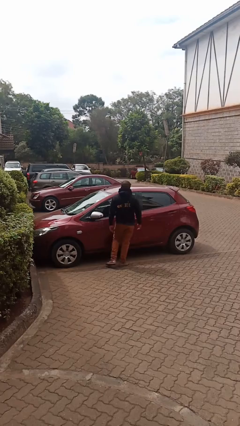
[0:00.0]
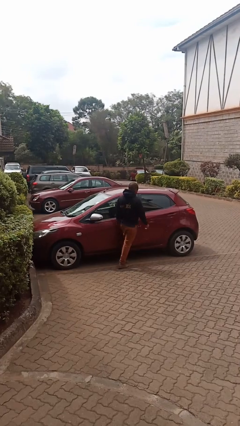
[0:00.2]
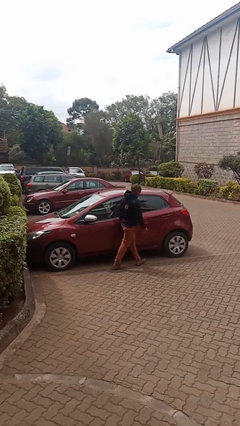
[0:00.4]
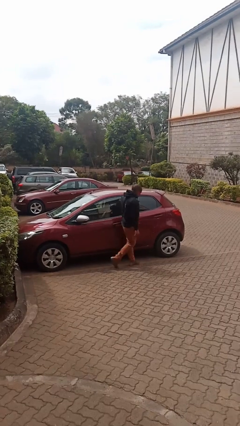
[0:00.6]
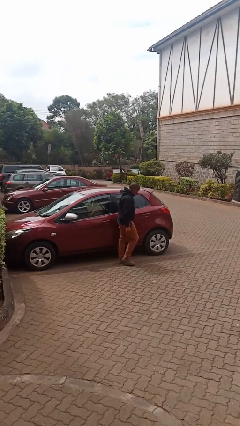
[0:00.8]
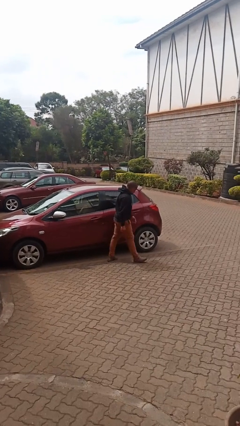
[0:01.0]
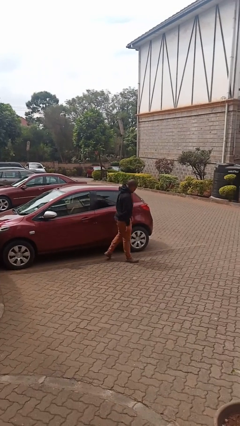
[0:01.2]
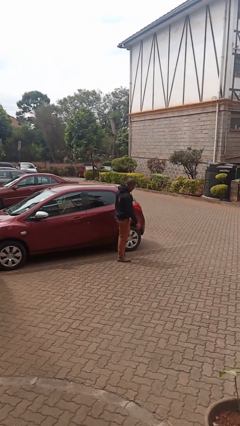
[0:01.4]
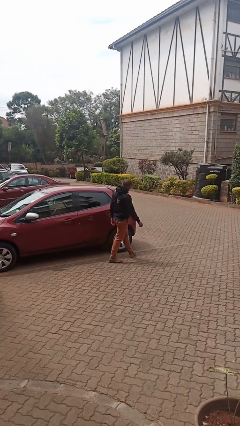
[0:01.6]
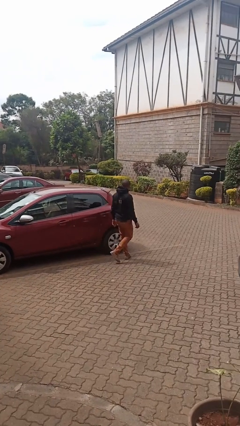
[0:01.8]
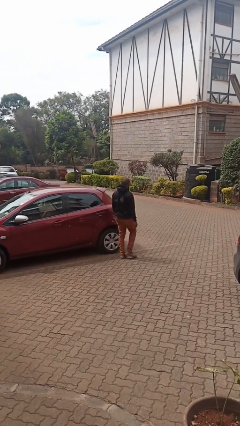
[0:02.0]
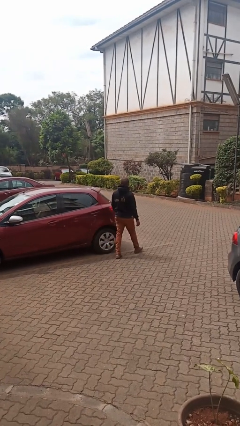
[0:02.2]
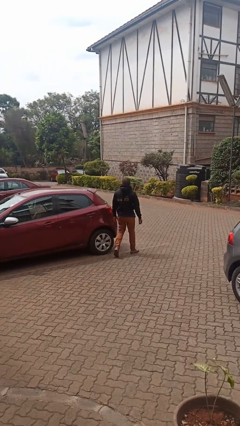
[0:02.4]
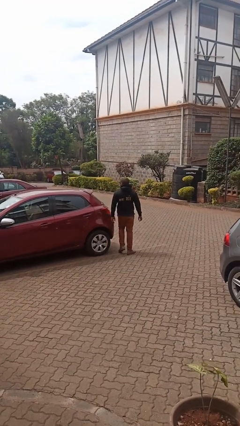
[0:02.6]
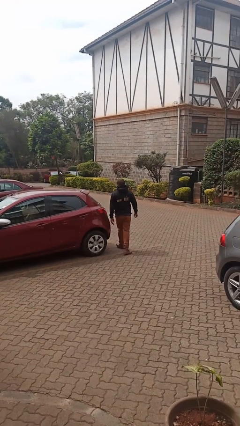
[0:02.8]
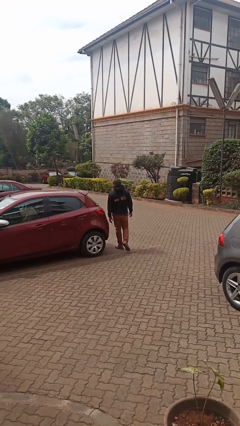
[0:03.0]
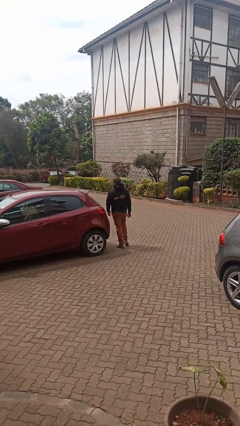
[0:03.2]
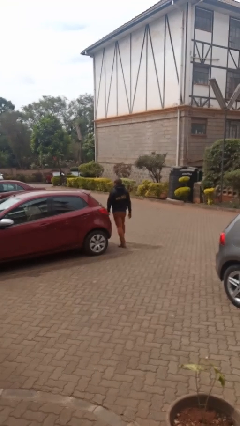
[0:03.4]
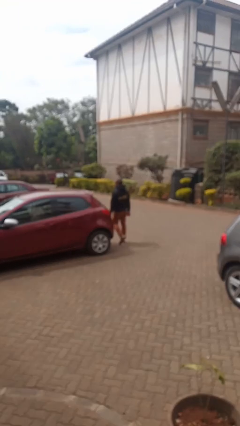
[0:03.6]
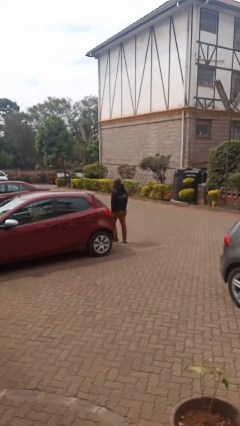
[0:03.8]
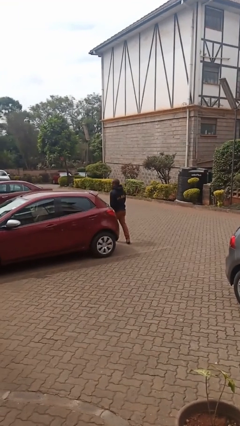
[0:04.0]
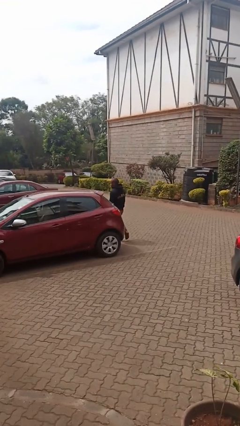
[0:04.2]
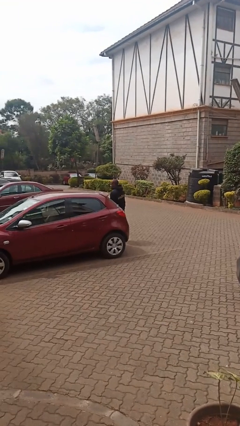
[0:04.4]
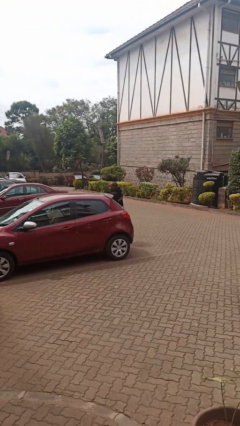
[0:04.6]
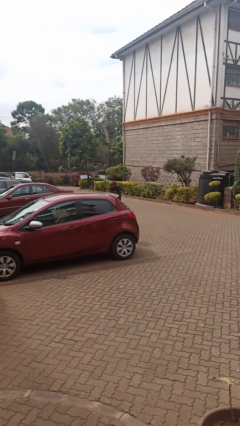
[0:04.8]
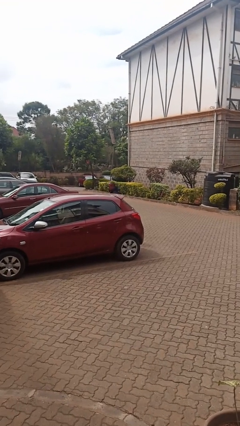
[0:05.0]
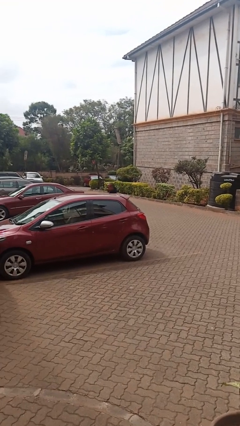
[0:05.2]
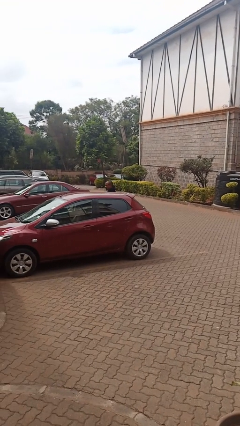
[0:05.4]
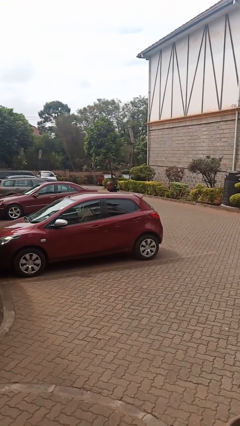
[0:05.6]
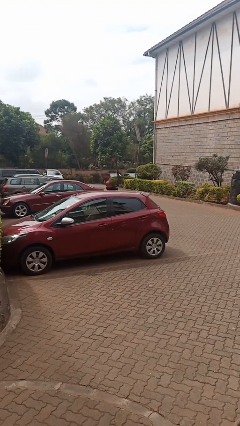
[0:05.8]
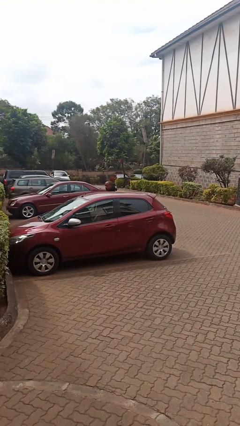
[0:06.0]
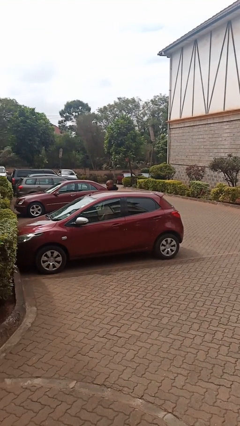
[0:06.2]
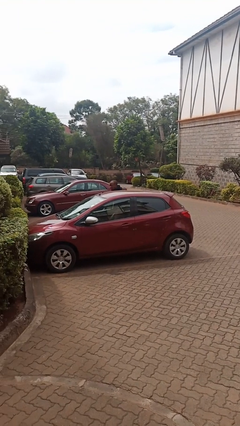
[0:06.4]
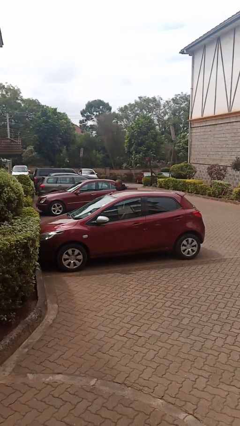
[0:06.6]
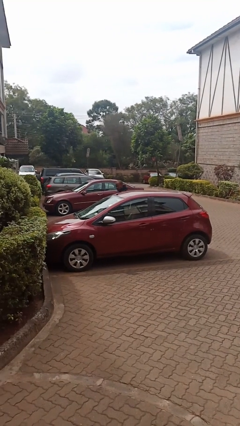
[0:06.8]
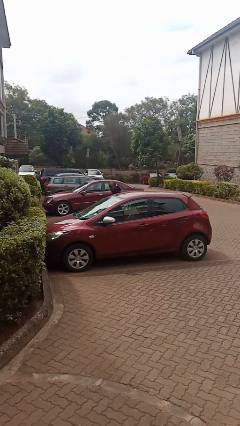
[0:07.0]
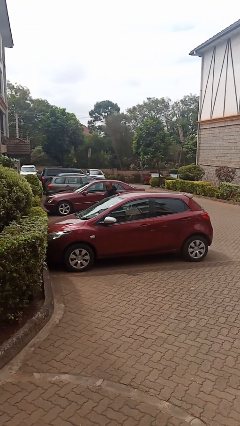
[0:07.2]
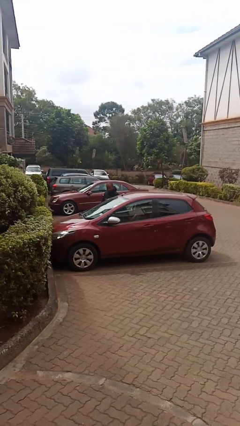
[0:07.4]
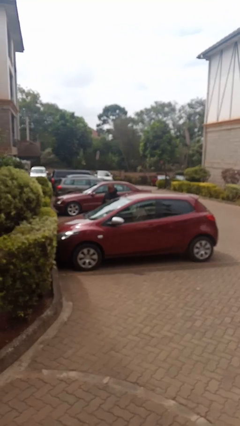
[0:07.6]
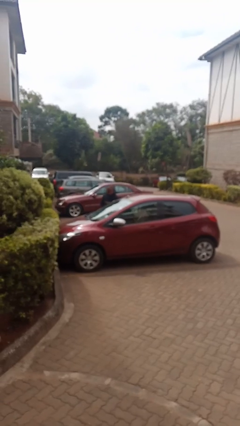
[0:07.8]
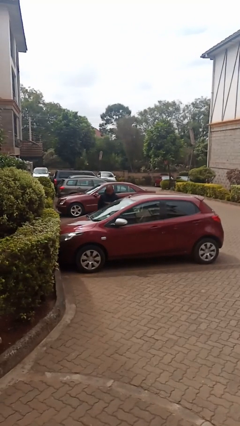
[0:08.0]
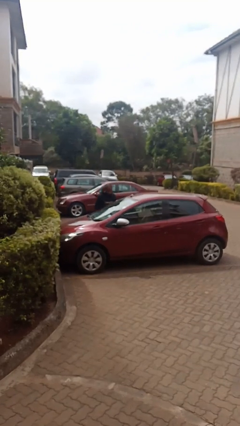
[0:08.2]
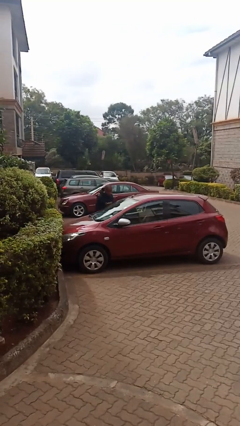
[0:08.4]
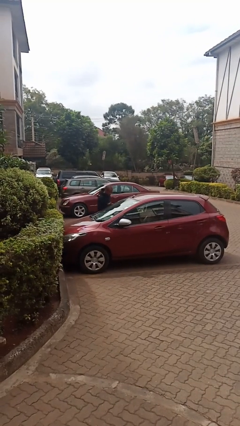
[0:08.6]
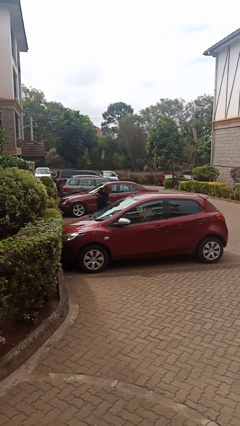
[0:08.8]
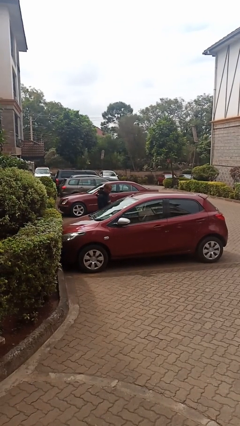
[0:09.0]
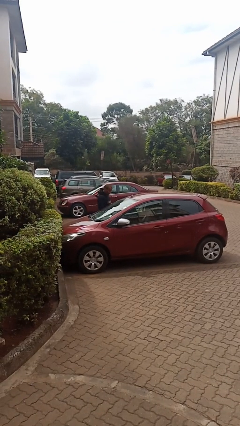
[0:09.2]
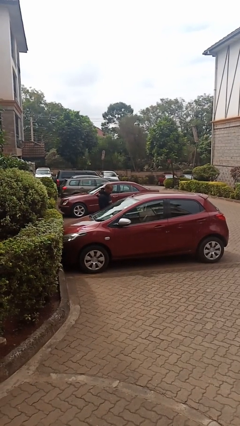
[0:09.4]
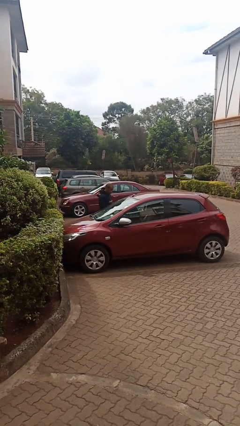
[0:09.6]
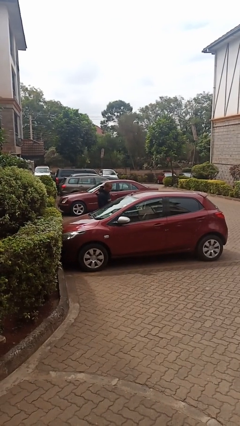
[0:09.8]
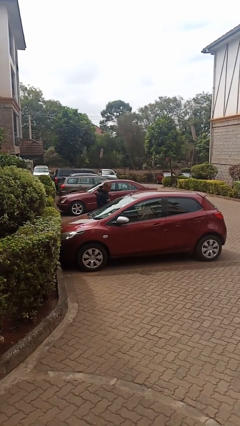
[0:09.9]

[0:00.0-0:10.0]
person walks around car

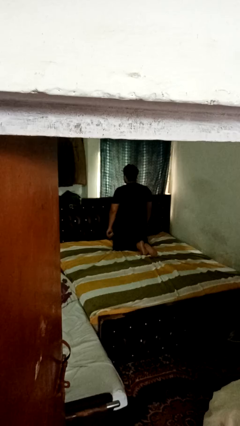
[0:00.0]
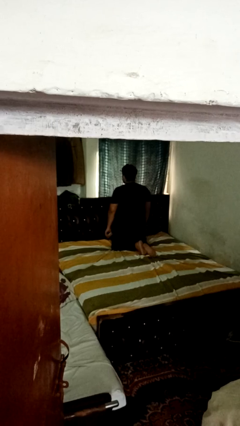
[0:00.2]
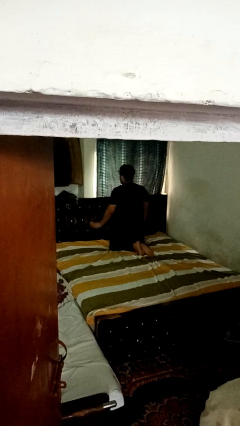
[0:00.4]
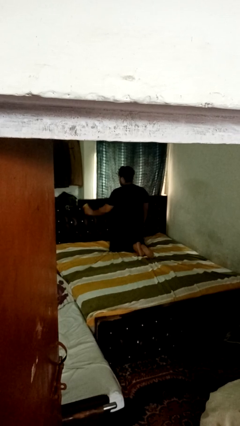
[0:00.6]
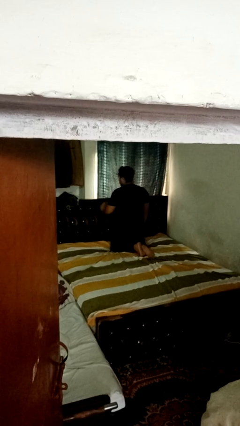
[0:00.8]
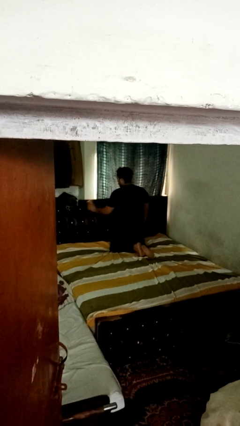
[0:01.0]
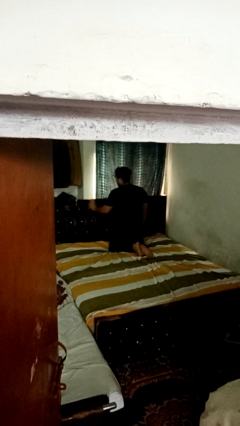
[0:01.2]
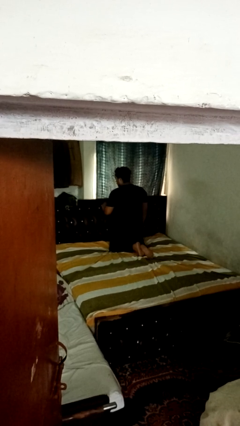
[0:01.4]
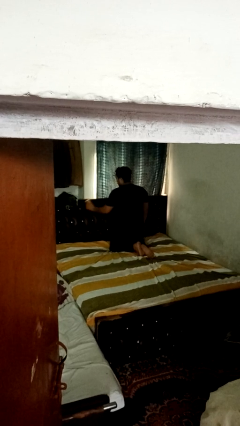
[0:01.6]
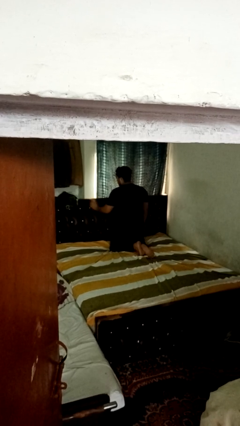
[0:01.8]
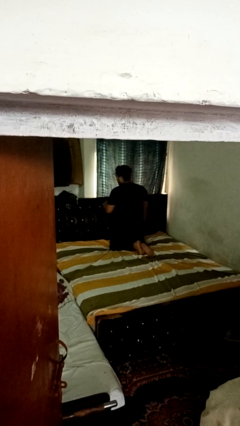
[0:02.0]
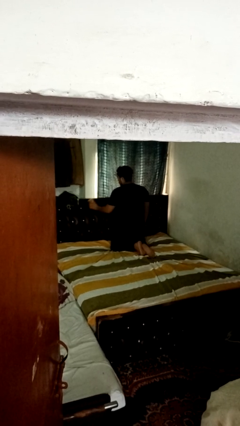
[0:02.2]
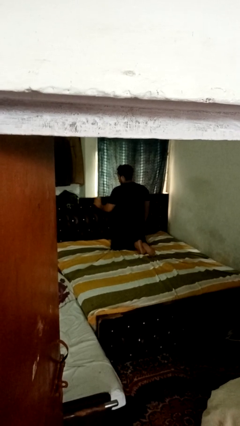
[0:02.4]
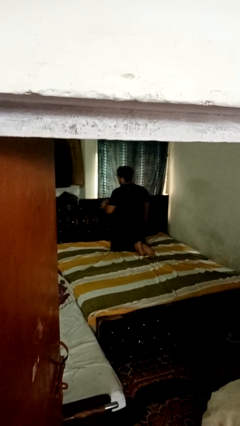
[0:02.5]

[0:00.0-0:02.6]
person dusts furniture

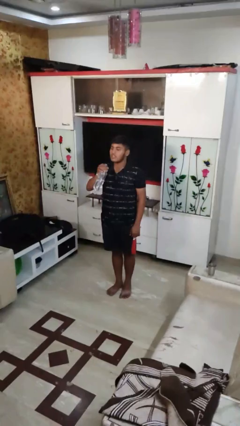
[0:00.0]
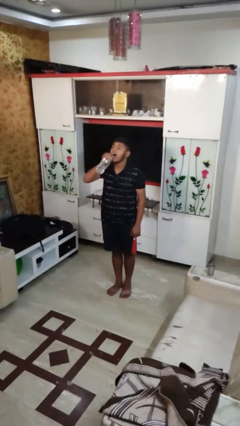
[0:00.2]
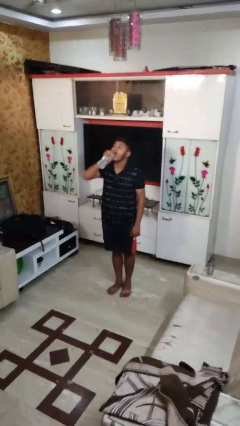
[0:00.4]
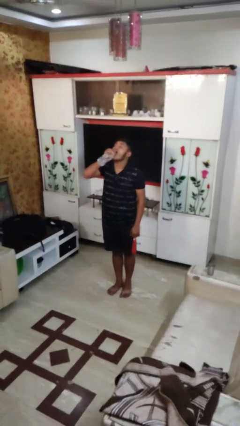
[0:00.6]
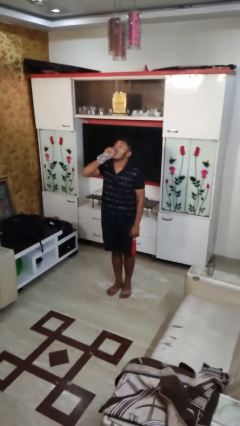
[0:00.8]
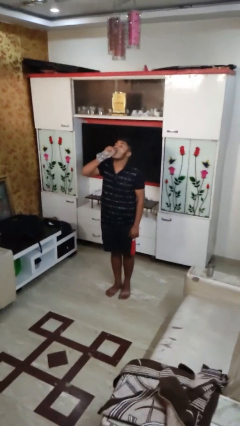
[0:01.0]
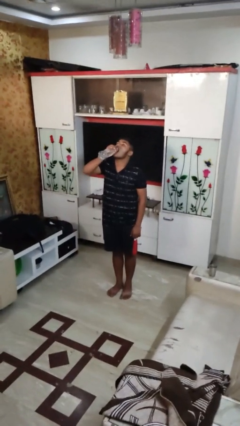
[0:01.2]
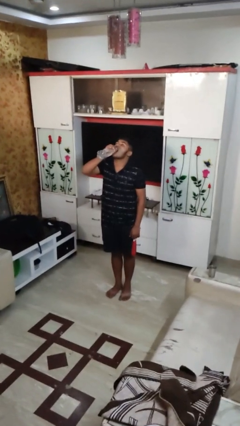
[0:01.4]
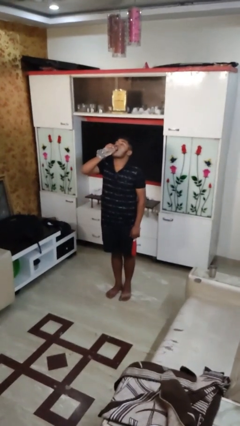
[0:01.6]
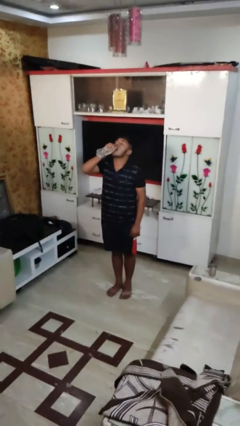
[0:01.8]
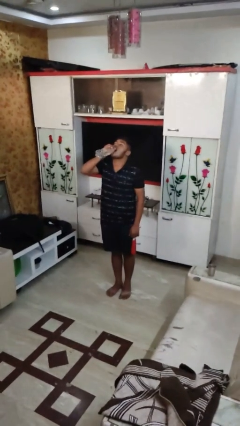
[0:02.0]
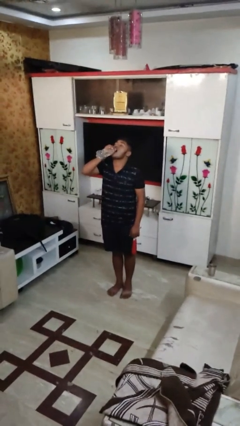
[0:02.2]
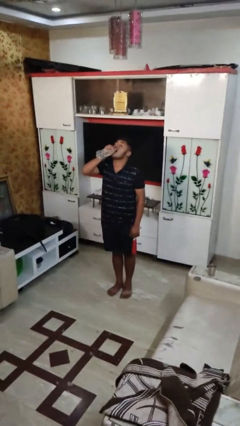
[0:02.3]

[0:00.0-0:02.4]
person drinks from bottle

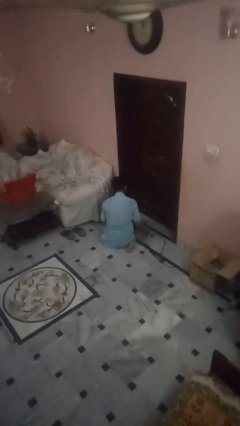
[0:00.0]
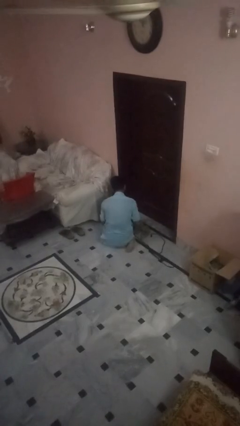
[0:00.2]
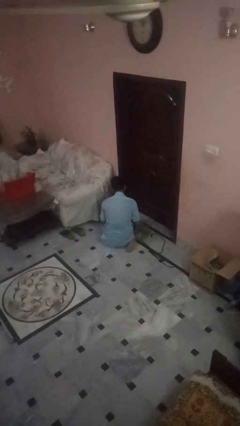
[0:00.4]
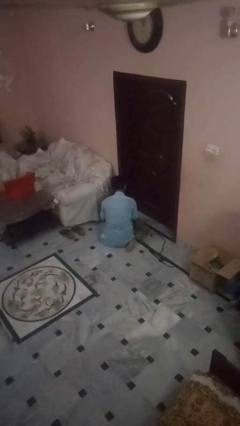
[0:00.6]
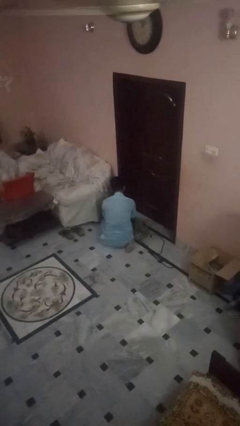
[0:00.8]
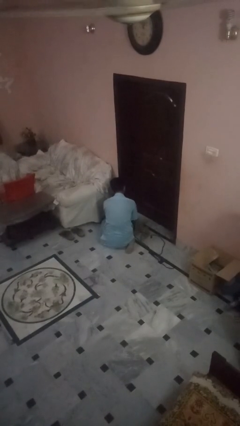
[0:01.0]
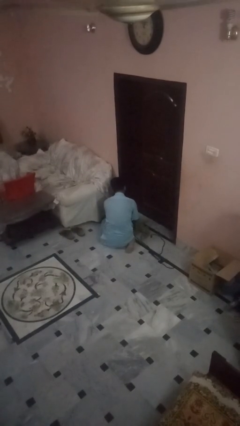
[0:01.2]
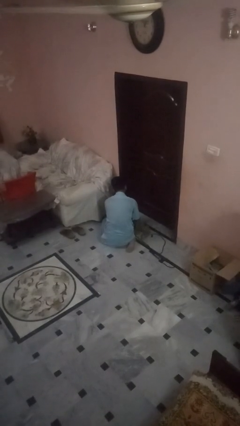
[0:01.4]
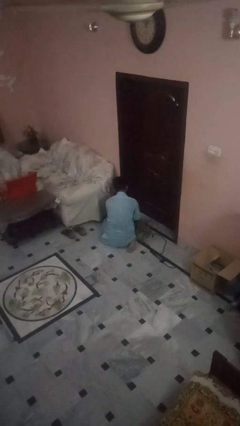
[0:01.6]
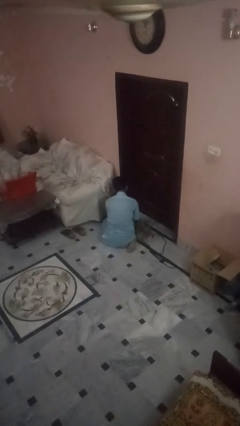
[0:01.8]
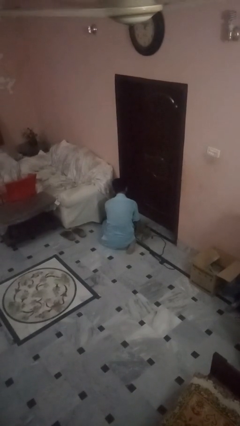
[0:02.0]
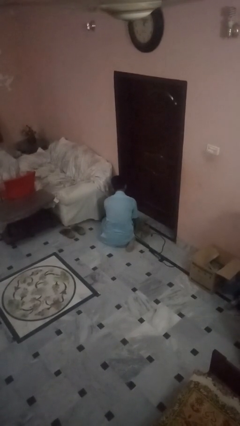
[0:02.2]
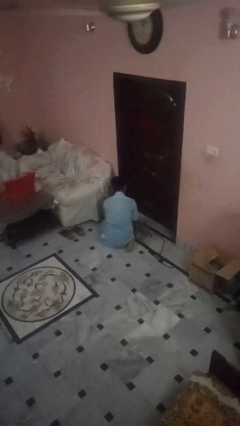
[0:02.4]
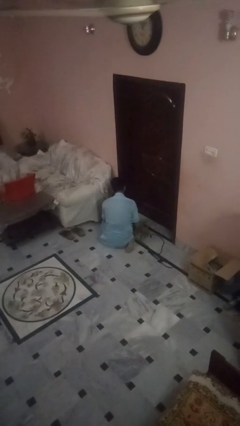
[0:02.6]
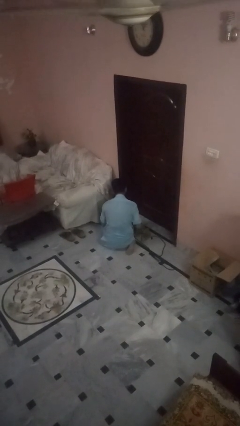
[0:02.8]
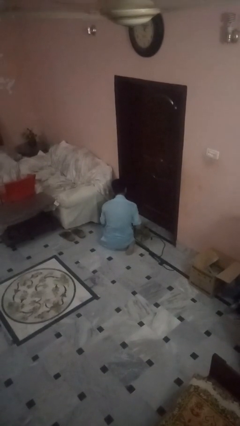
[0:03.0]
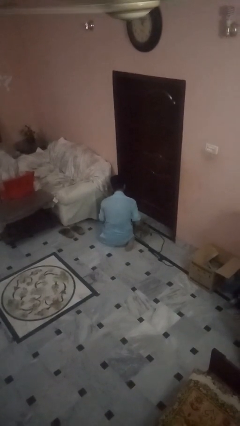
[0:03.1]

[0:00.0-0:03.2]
person unattaches leash from dog
